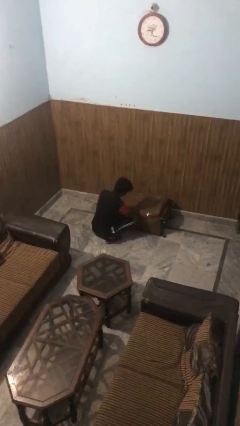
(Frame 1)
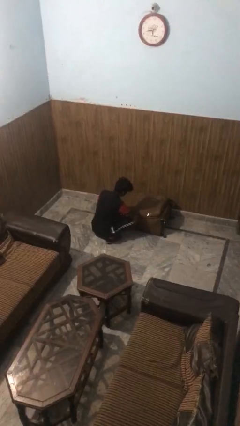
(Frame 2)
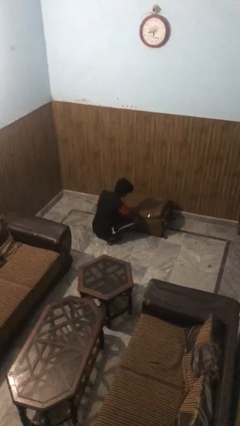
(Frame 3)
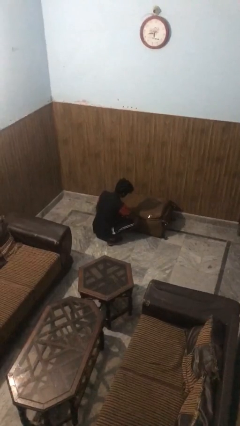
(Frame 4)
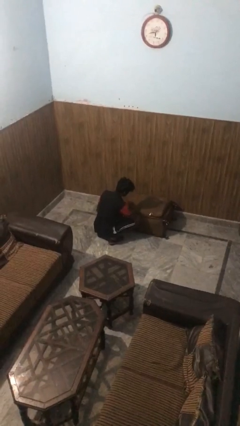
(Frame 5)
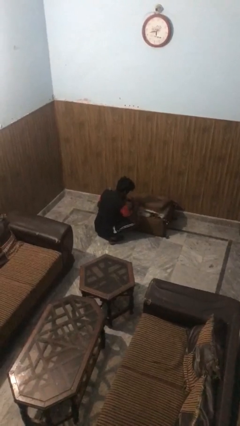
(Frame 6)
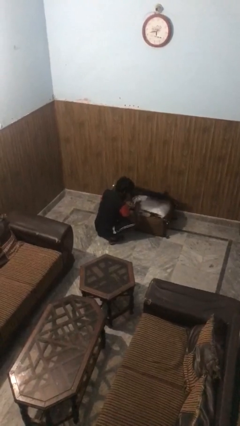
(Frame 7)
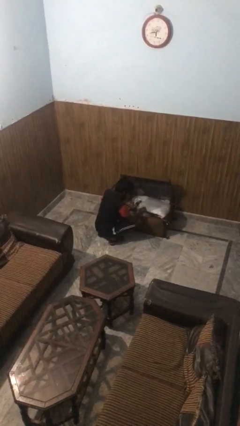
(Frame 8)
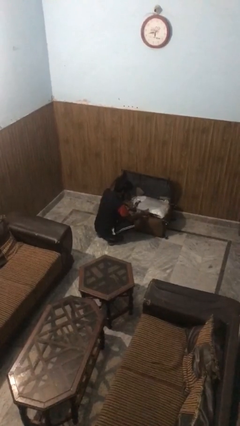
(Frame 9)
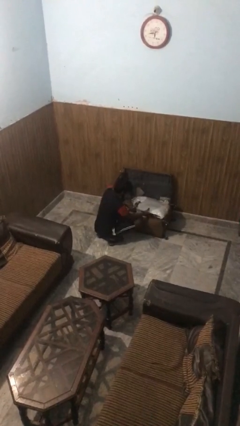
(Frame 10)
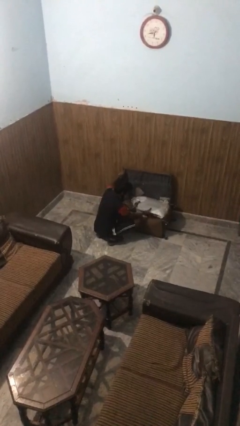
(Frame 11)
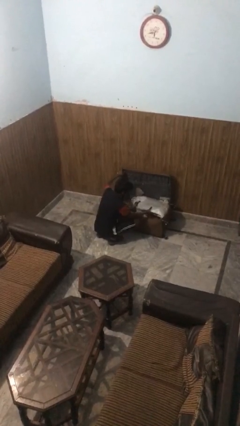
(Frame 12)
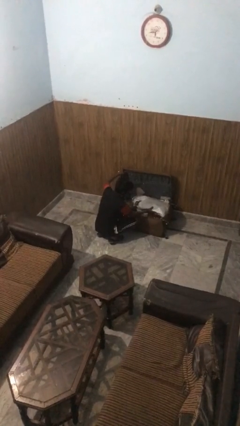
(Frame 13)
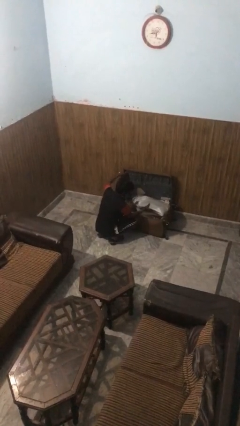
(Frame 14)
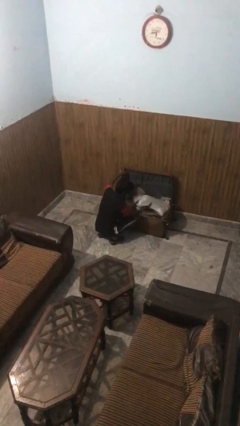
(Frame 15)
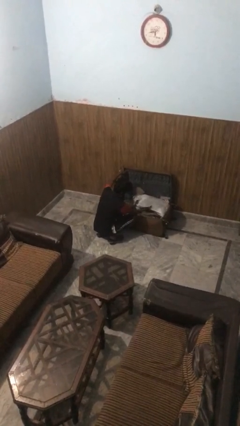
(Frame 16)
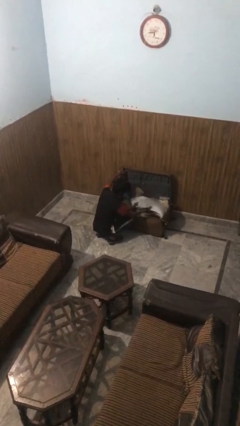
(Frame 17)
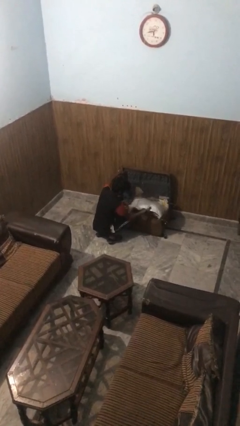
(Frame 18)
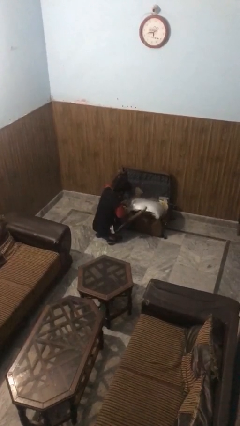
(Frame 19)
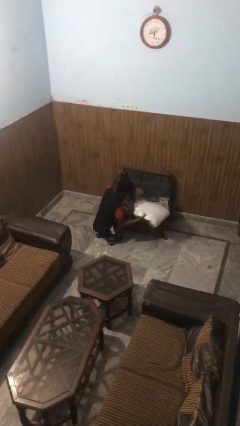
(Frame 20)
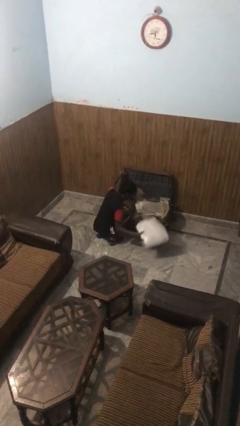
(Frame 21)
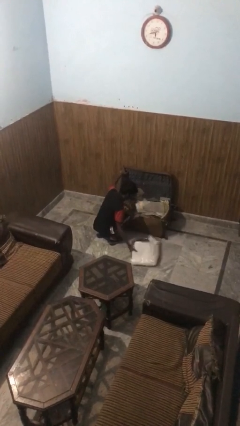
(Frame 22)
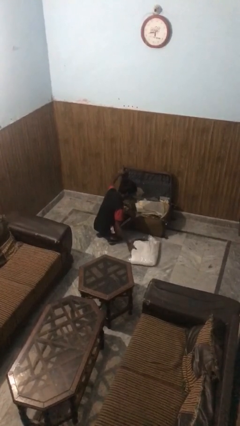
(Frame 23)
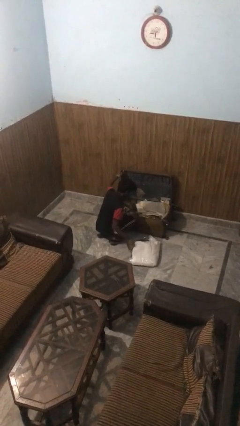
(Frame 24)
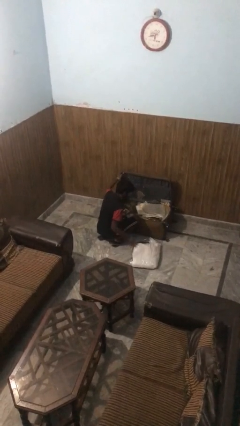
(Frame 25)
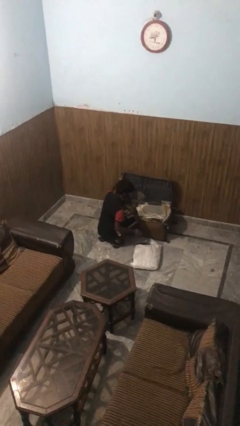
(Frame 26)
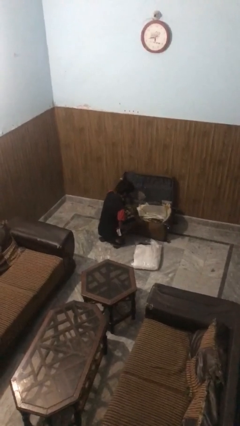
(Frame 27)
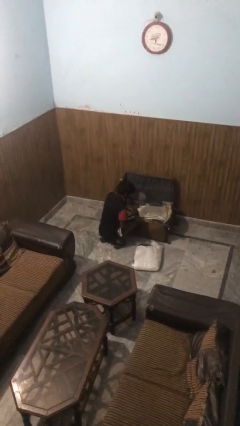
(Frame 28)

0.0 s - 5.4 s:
person unloads clothes from suitcase

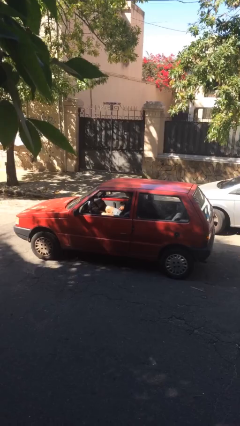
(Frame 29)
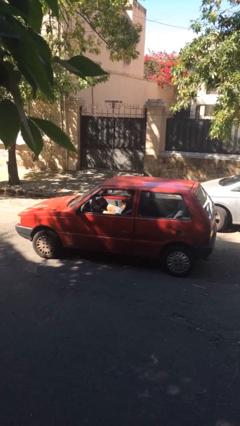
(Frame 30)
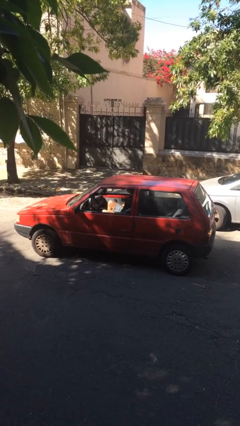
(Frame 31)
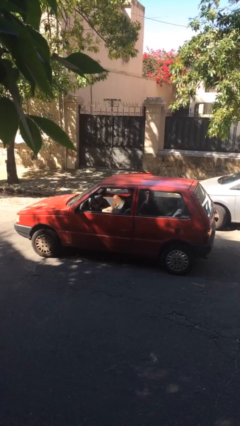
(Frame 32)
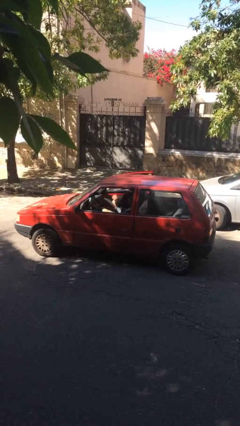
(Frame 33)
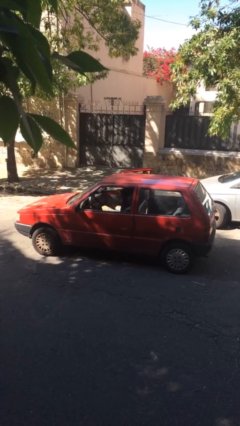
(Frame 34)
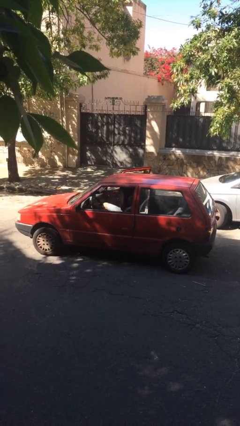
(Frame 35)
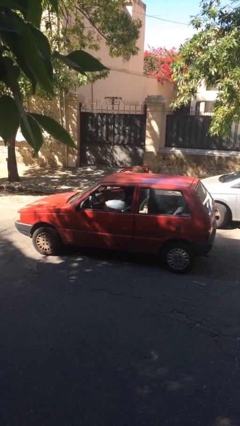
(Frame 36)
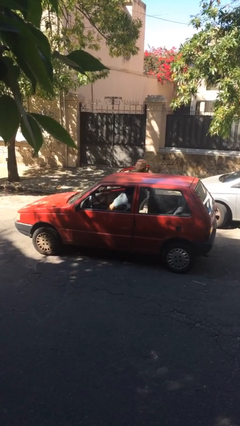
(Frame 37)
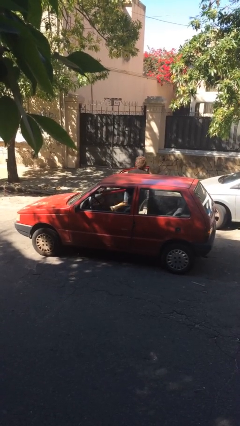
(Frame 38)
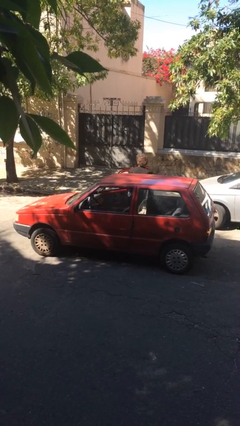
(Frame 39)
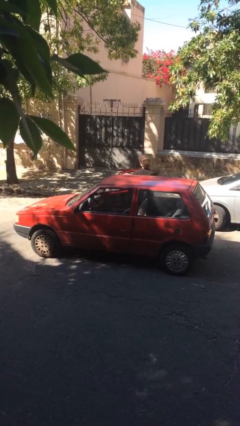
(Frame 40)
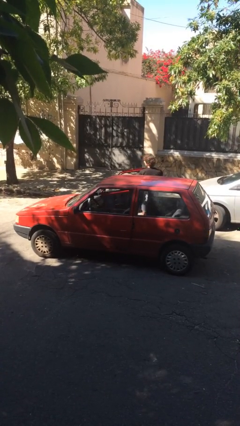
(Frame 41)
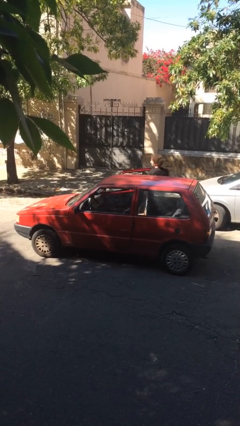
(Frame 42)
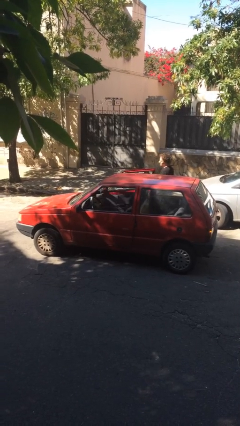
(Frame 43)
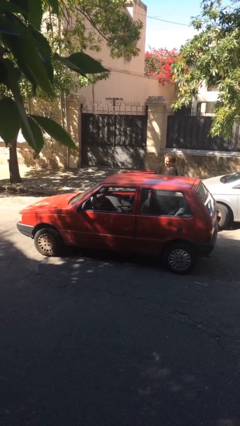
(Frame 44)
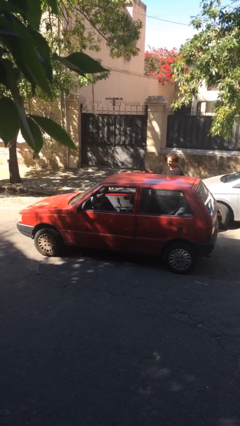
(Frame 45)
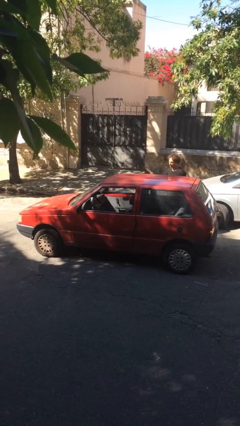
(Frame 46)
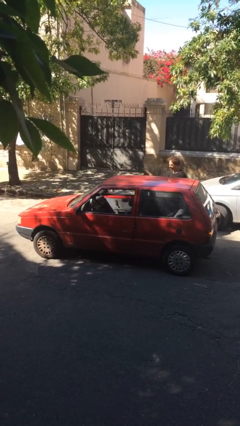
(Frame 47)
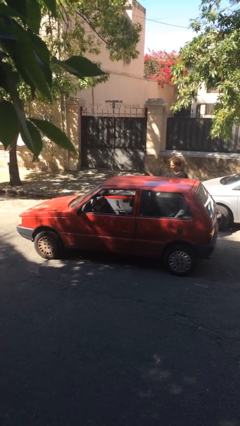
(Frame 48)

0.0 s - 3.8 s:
car drops off person

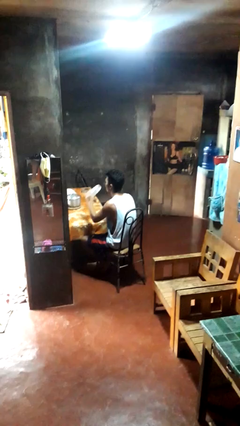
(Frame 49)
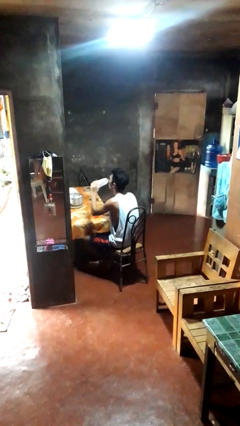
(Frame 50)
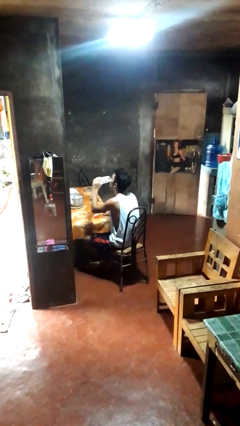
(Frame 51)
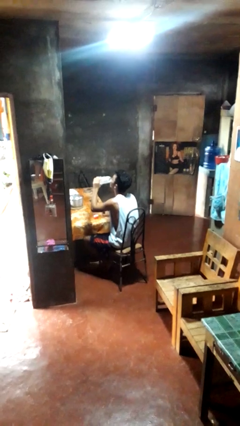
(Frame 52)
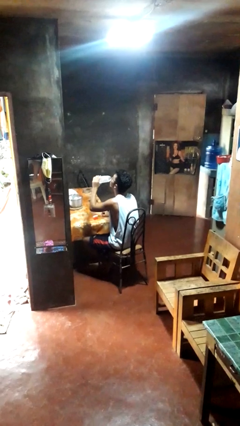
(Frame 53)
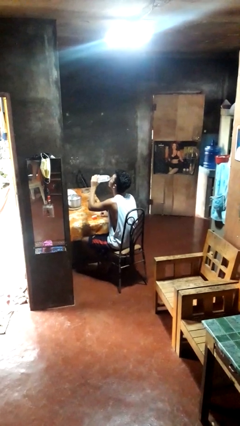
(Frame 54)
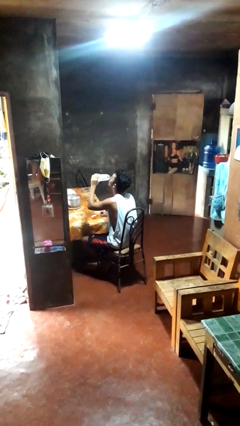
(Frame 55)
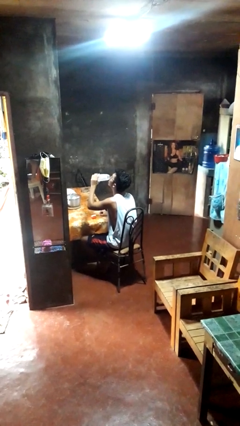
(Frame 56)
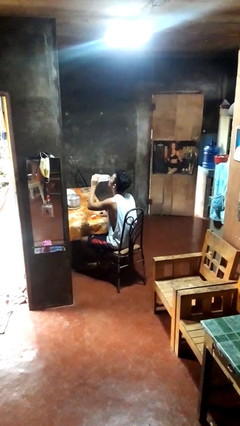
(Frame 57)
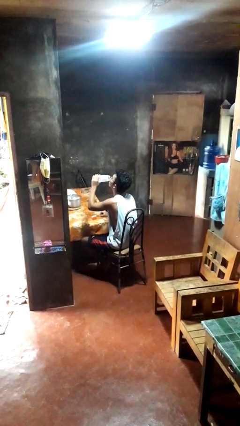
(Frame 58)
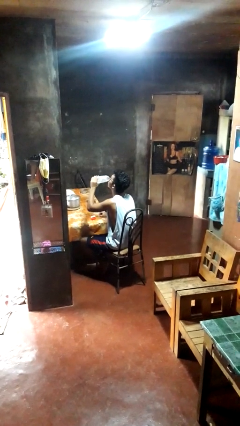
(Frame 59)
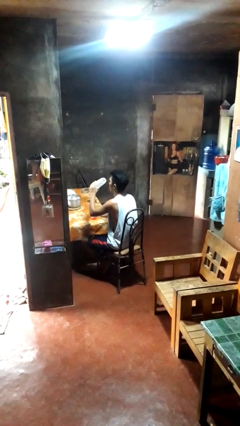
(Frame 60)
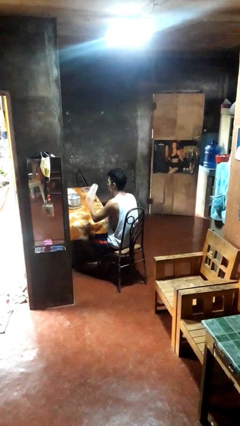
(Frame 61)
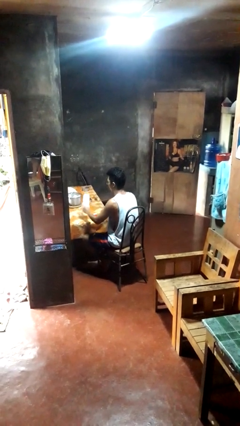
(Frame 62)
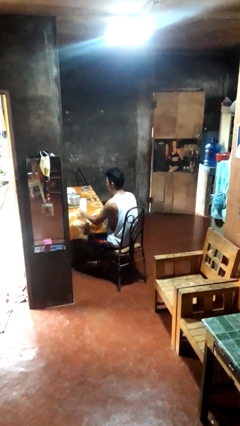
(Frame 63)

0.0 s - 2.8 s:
person drinks from bottle

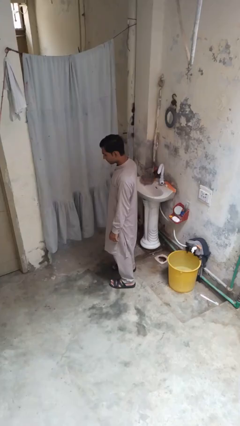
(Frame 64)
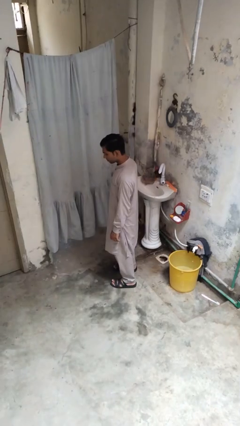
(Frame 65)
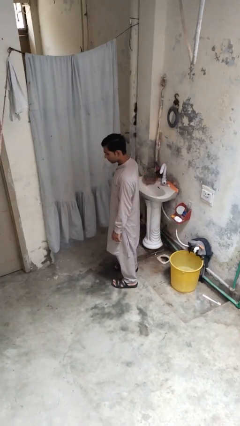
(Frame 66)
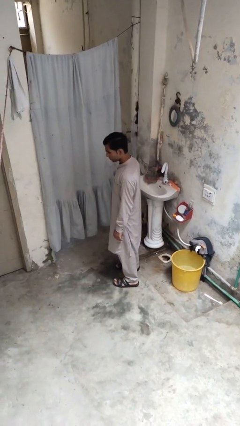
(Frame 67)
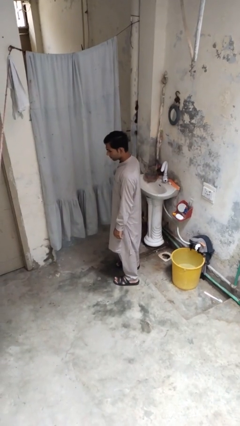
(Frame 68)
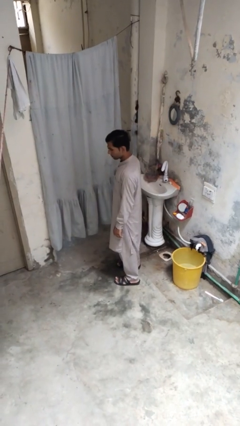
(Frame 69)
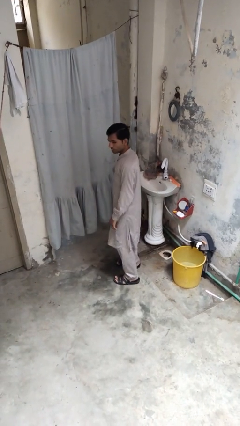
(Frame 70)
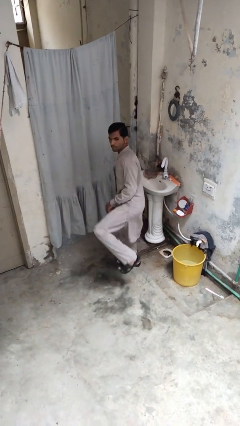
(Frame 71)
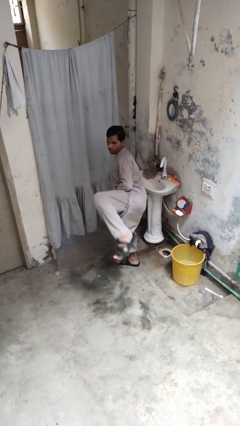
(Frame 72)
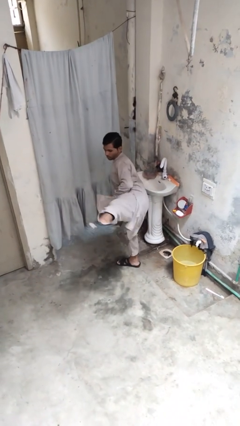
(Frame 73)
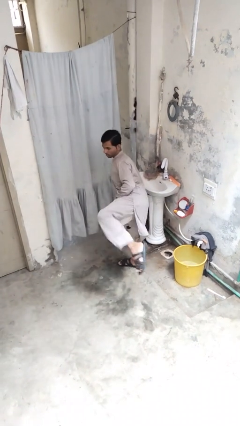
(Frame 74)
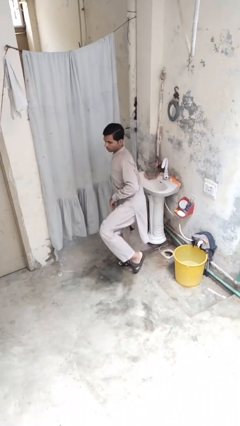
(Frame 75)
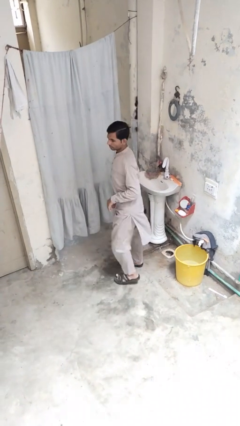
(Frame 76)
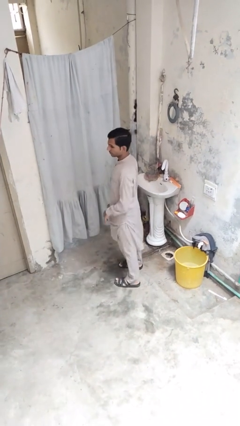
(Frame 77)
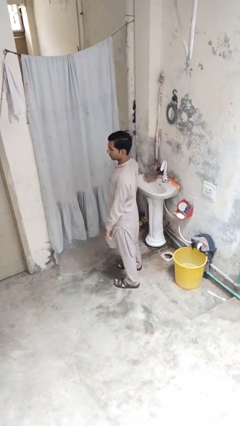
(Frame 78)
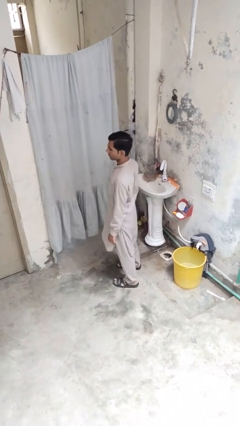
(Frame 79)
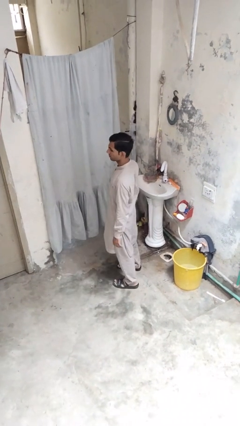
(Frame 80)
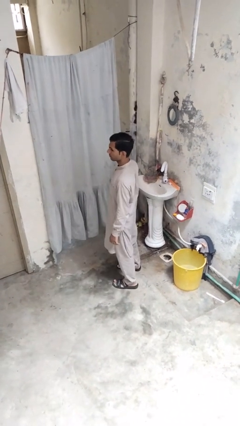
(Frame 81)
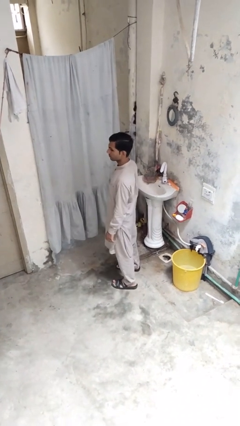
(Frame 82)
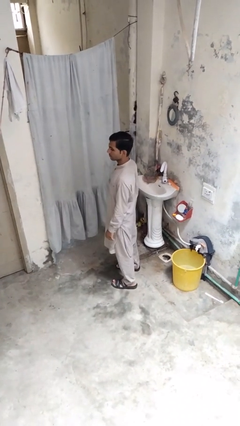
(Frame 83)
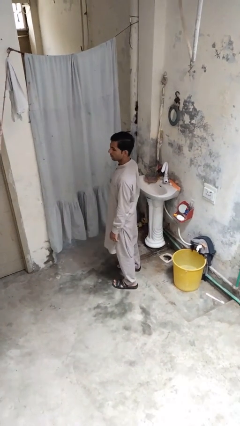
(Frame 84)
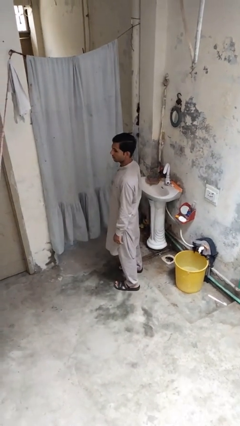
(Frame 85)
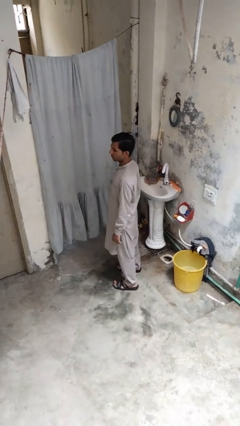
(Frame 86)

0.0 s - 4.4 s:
person karate kicks

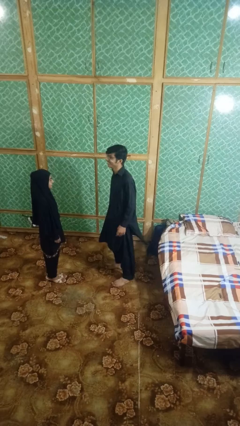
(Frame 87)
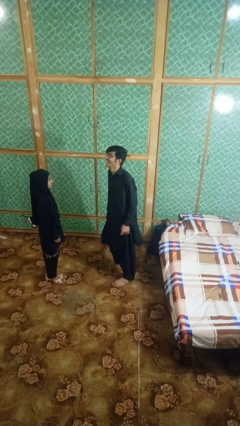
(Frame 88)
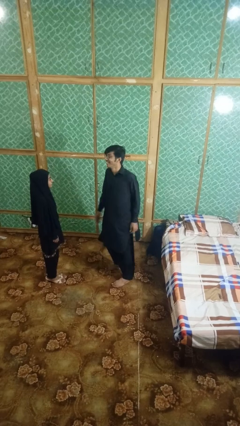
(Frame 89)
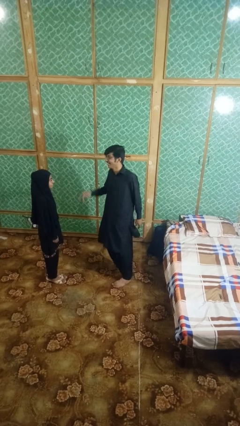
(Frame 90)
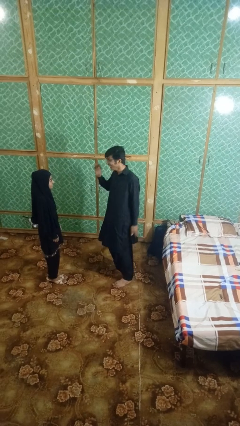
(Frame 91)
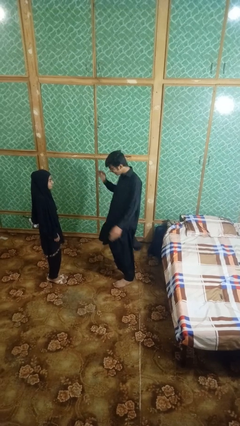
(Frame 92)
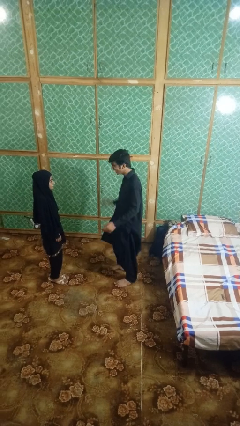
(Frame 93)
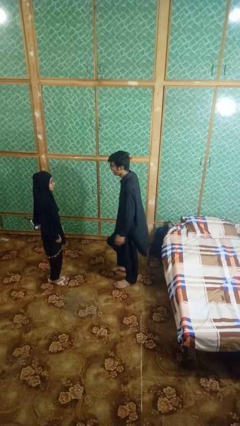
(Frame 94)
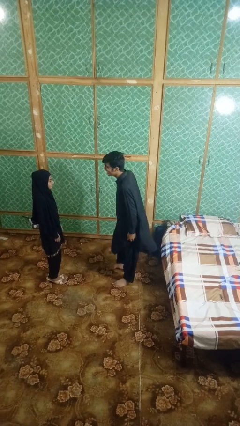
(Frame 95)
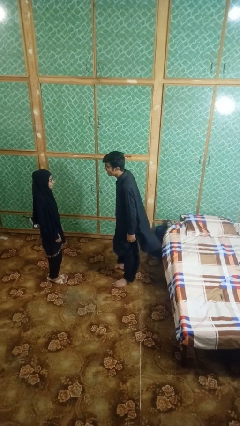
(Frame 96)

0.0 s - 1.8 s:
person laughs with person
